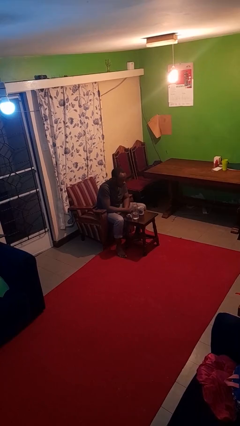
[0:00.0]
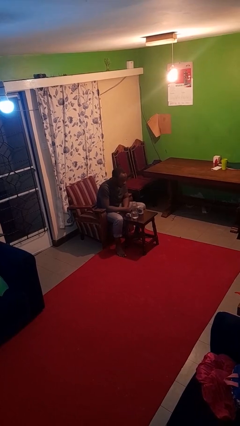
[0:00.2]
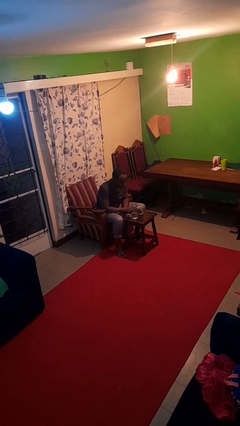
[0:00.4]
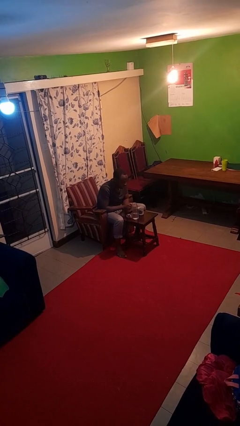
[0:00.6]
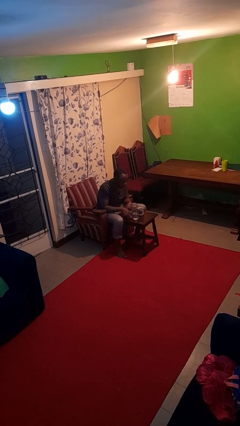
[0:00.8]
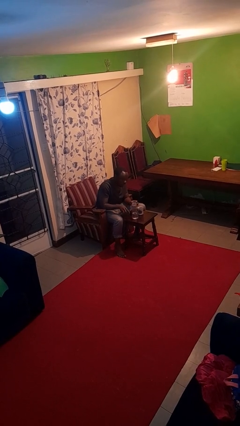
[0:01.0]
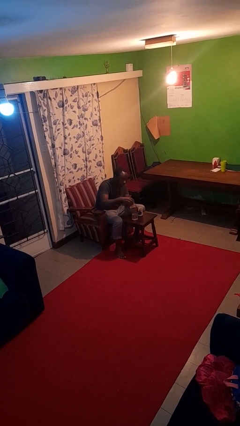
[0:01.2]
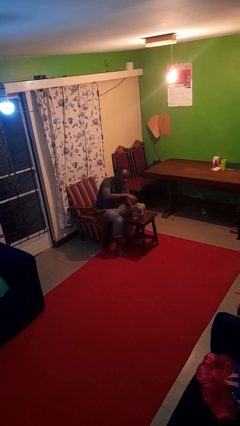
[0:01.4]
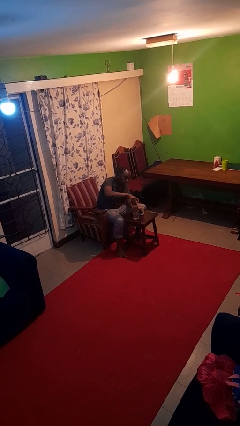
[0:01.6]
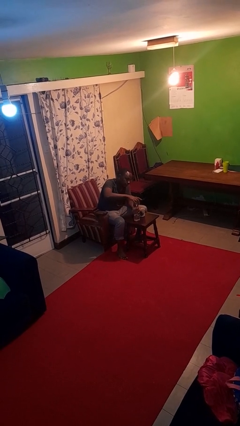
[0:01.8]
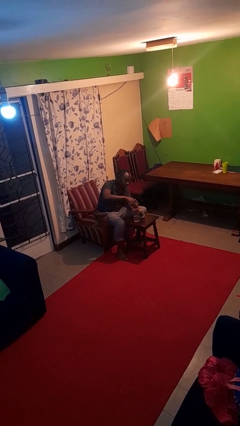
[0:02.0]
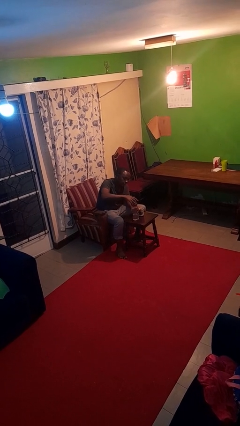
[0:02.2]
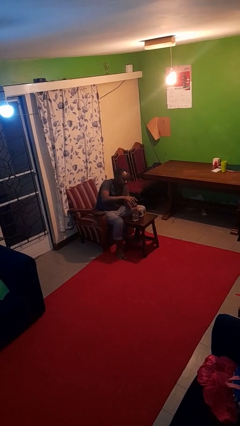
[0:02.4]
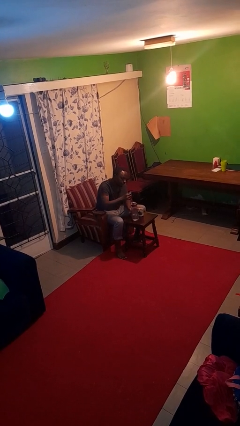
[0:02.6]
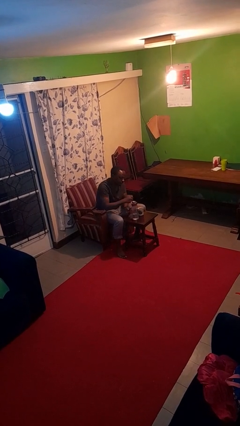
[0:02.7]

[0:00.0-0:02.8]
person screws lid to bottle

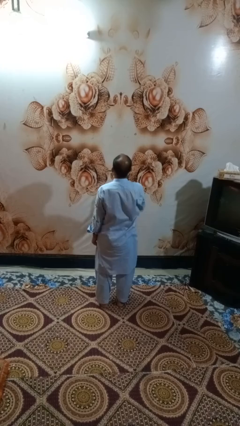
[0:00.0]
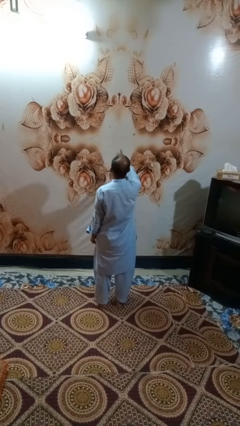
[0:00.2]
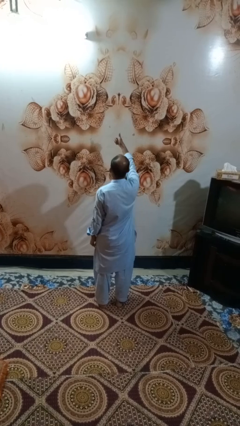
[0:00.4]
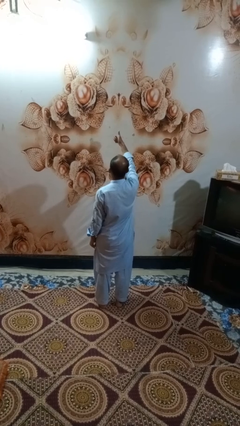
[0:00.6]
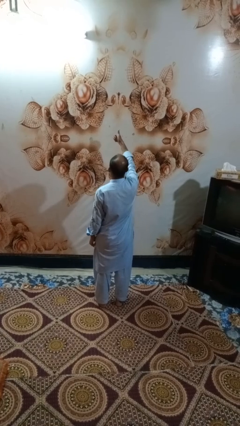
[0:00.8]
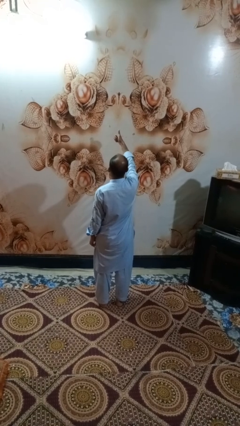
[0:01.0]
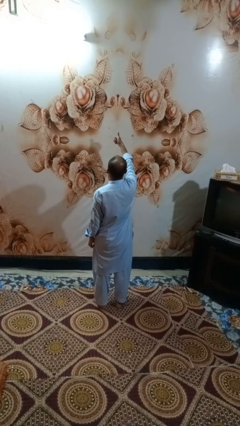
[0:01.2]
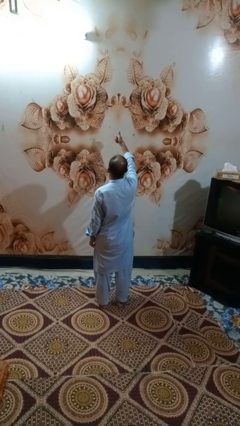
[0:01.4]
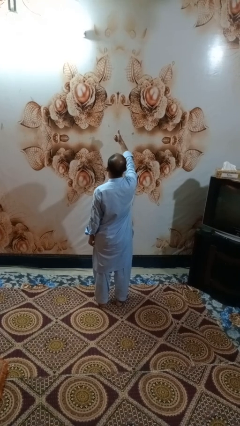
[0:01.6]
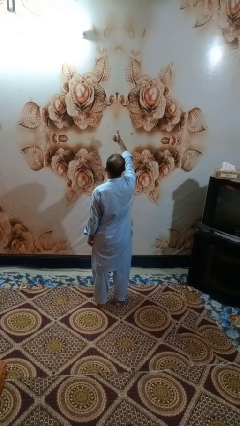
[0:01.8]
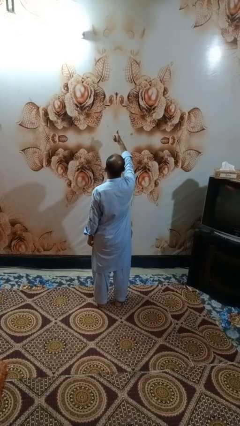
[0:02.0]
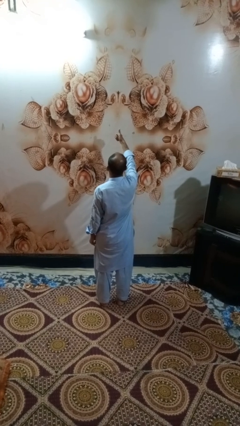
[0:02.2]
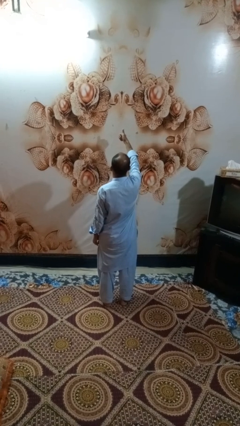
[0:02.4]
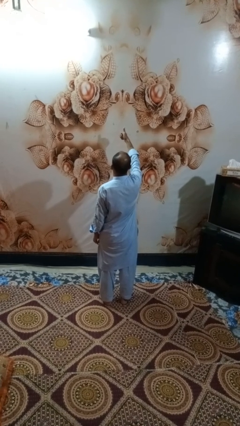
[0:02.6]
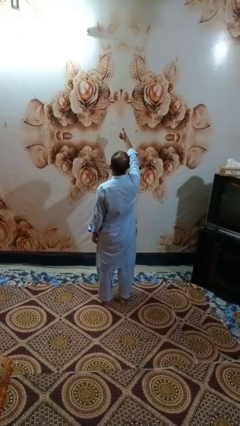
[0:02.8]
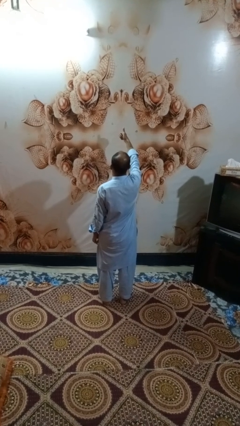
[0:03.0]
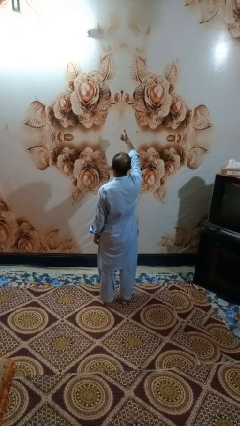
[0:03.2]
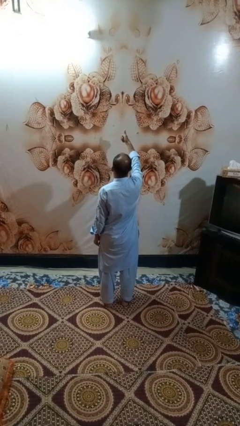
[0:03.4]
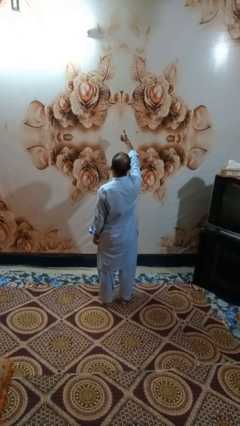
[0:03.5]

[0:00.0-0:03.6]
person gestures thumbs up

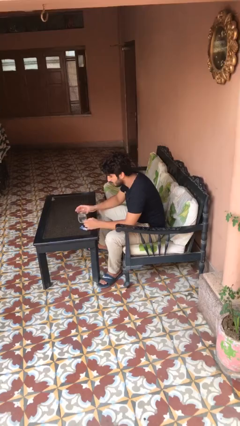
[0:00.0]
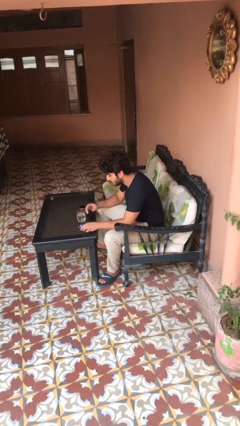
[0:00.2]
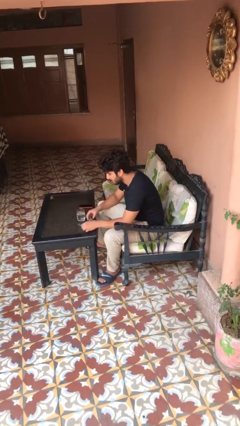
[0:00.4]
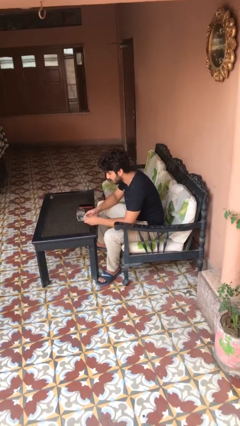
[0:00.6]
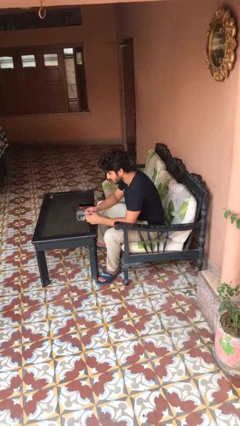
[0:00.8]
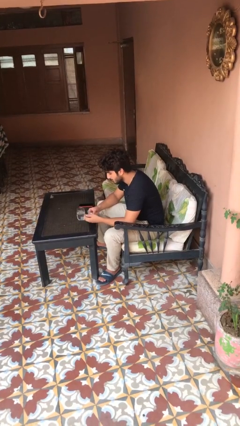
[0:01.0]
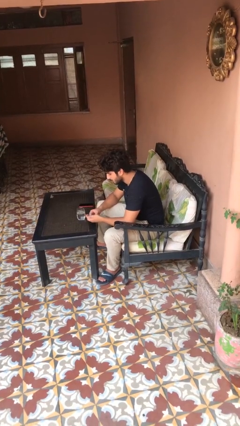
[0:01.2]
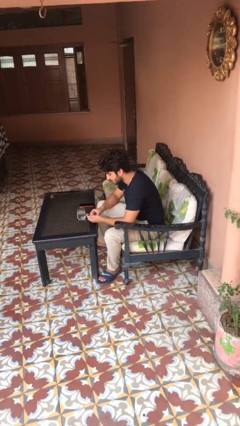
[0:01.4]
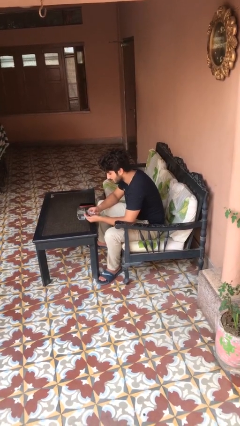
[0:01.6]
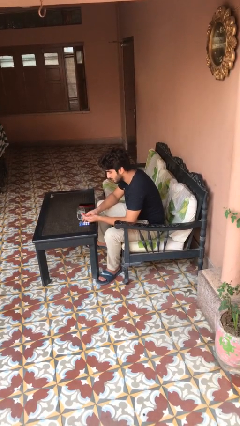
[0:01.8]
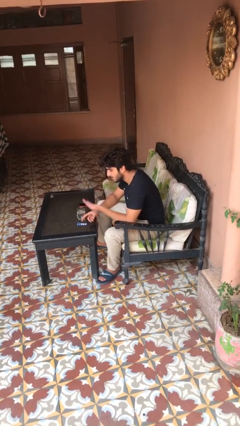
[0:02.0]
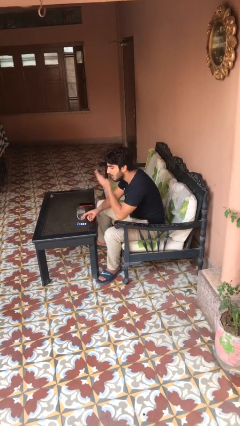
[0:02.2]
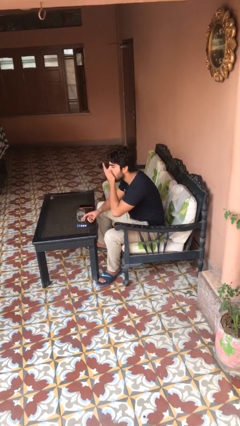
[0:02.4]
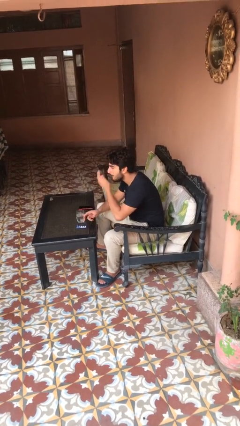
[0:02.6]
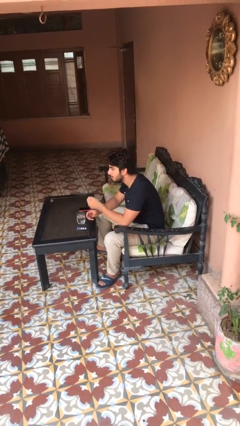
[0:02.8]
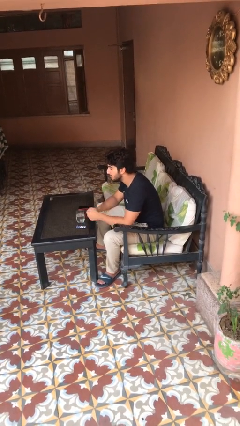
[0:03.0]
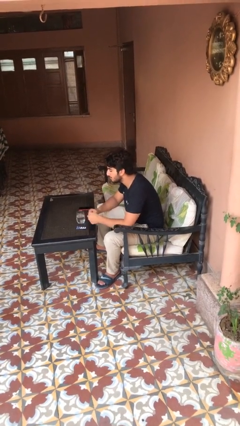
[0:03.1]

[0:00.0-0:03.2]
person takes medicine pills

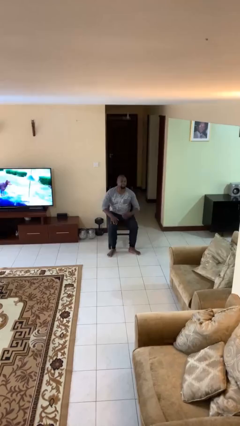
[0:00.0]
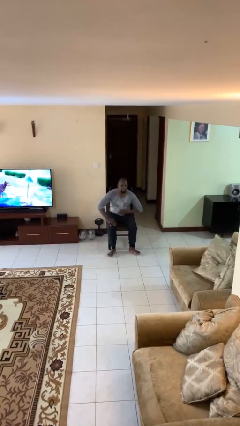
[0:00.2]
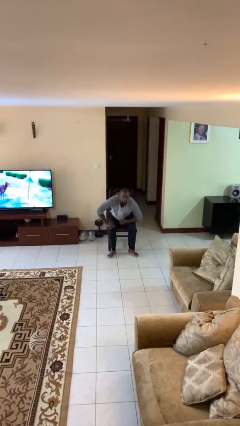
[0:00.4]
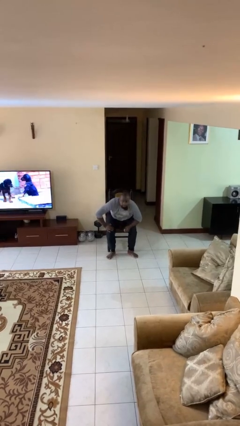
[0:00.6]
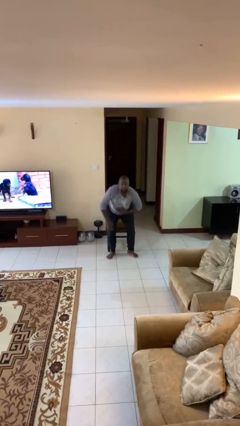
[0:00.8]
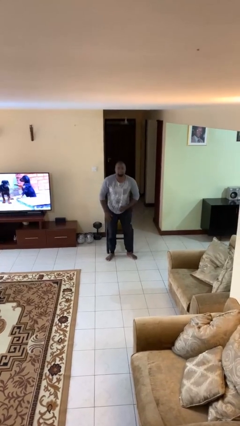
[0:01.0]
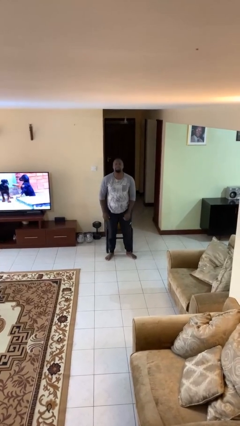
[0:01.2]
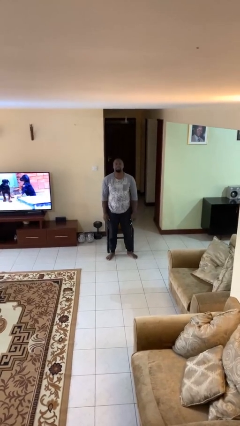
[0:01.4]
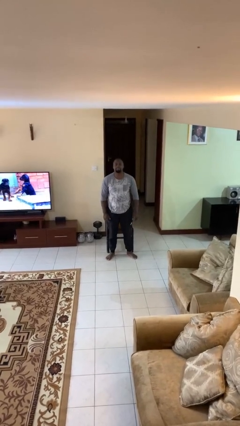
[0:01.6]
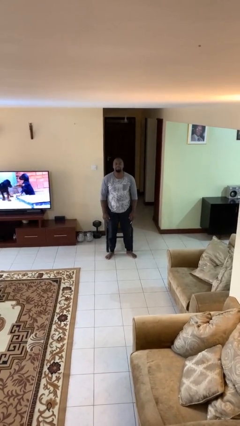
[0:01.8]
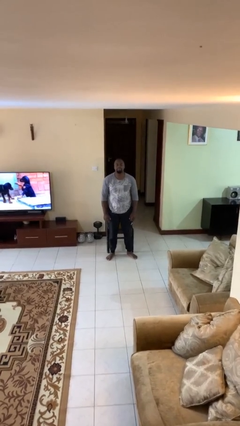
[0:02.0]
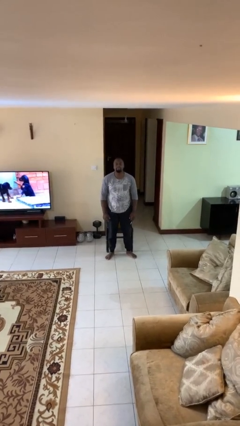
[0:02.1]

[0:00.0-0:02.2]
person stands up

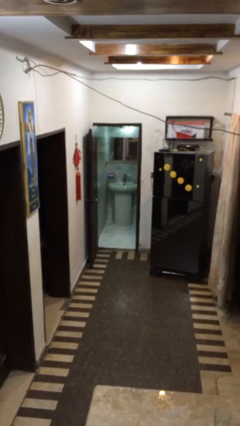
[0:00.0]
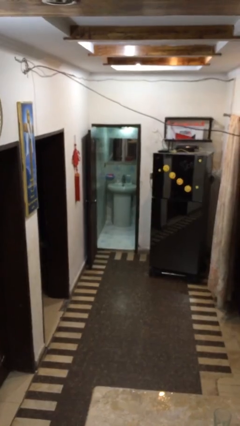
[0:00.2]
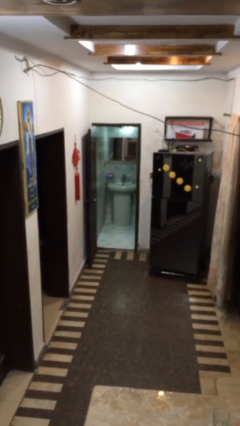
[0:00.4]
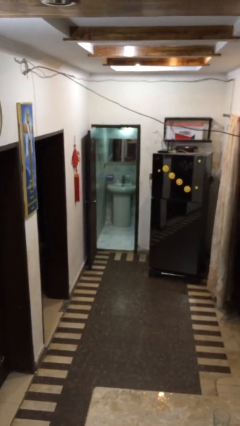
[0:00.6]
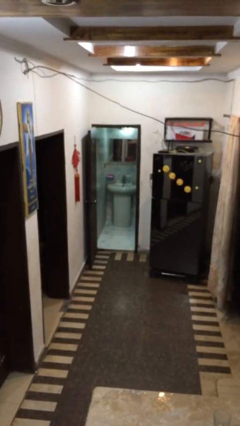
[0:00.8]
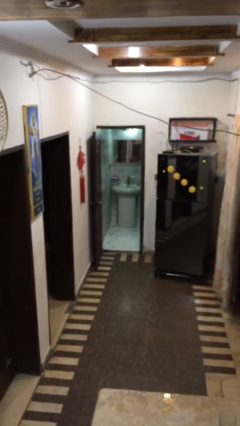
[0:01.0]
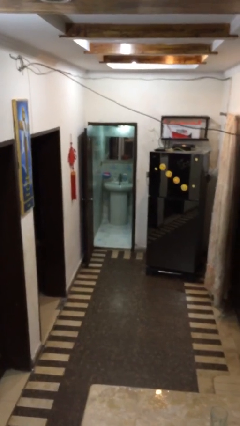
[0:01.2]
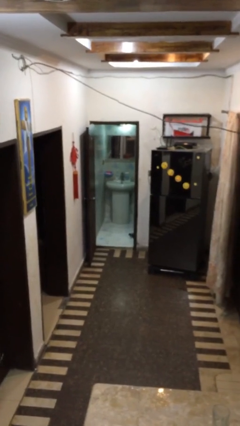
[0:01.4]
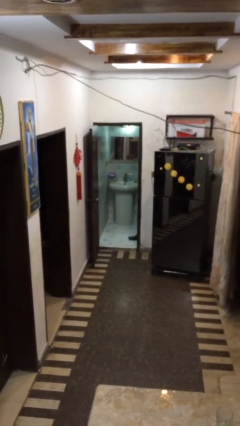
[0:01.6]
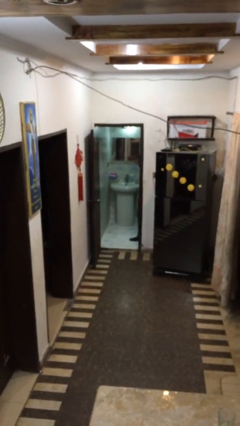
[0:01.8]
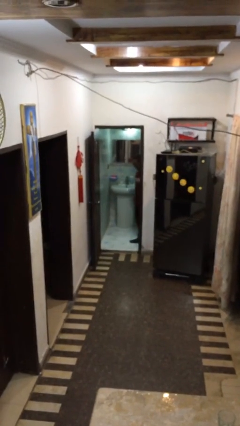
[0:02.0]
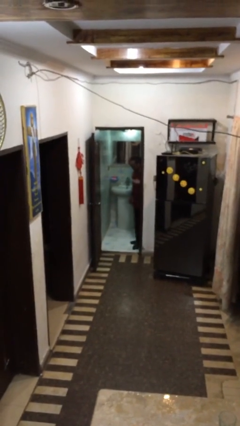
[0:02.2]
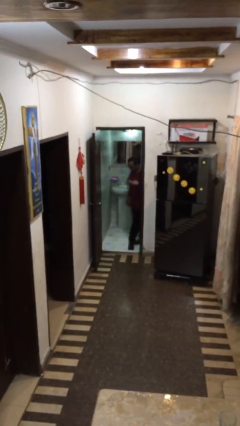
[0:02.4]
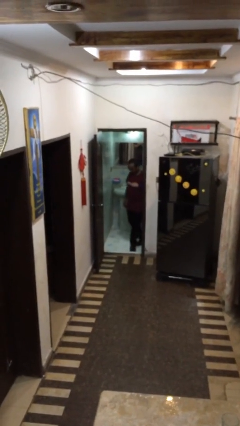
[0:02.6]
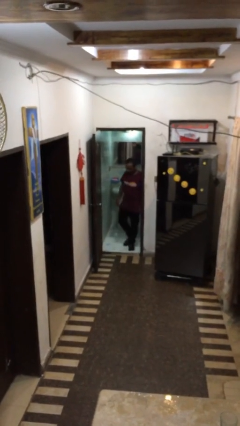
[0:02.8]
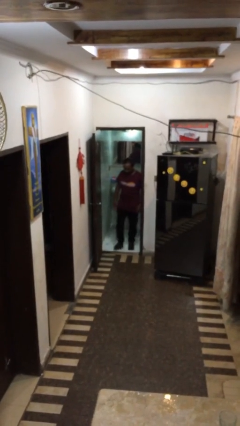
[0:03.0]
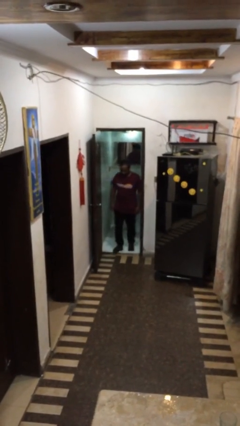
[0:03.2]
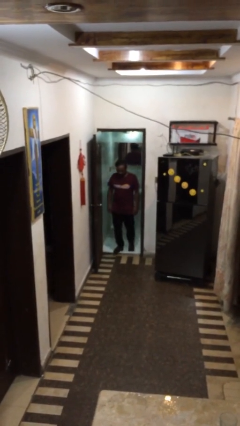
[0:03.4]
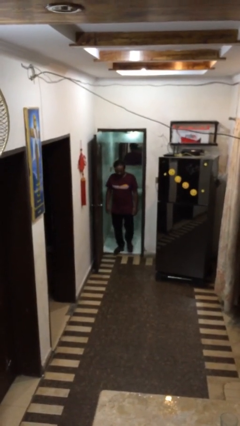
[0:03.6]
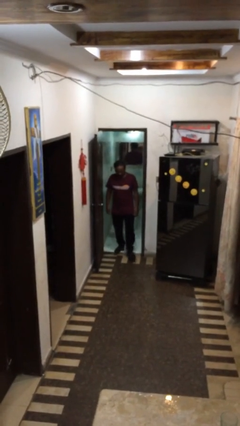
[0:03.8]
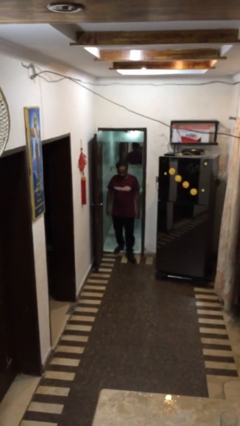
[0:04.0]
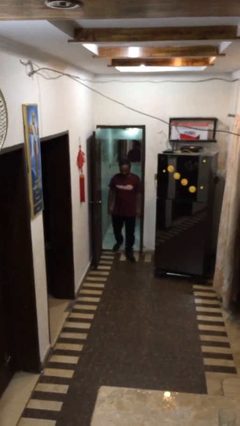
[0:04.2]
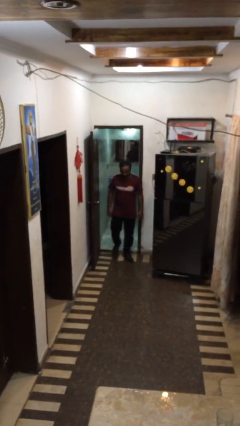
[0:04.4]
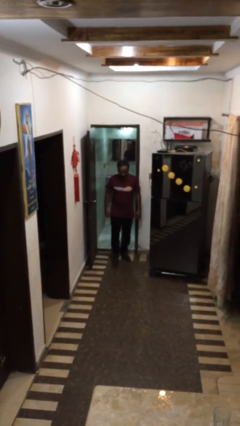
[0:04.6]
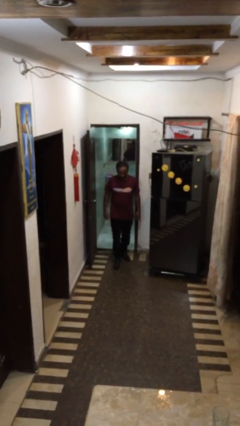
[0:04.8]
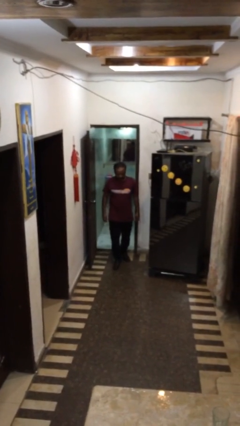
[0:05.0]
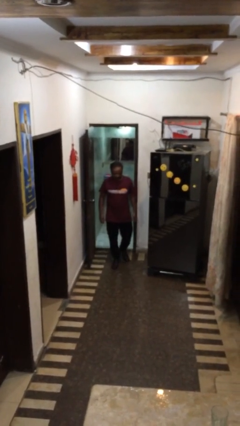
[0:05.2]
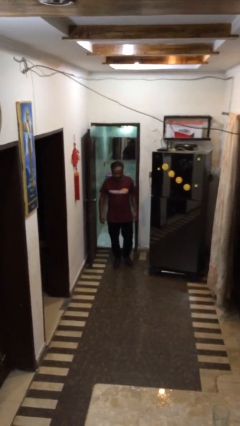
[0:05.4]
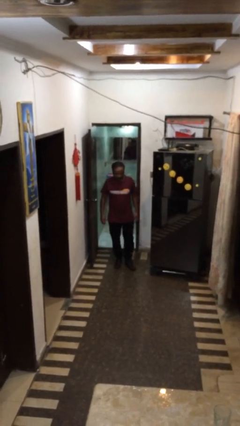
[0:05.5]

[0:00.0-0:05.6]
person enters scene through structure
